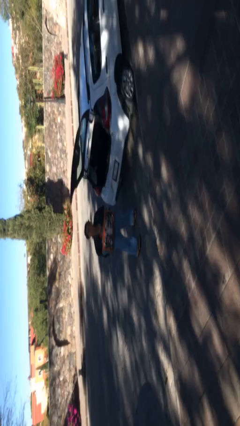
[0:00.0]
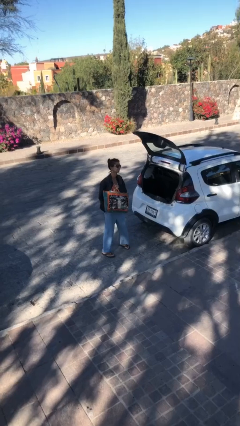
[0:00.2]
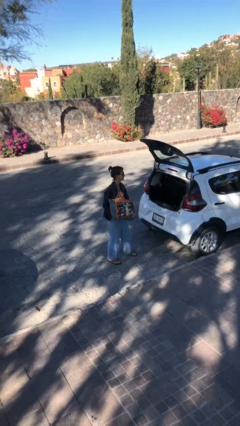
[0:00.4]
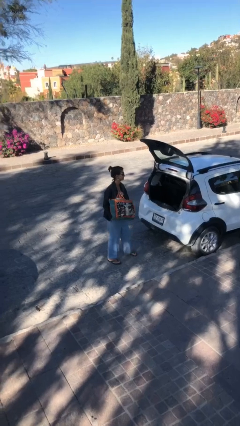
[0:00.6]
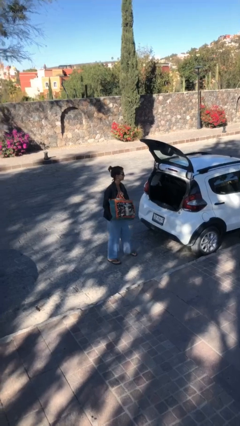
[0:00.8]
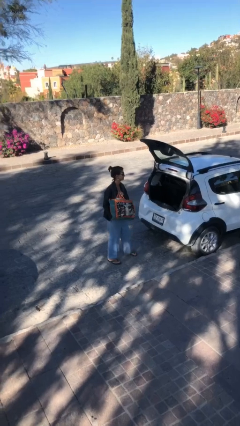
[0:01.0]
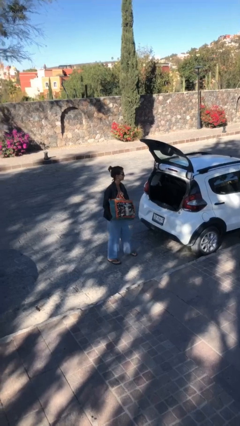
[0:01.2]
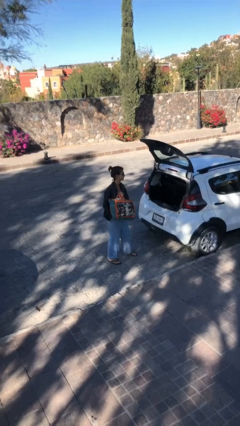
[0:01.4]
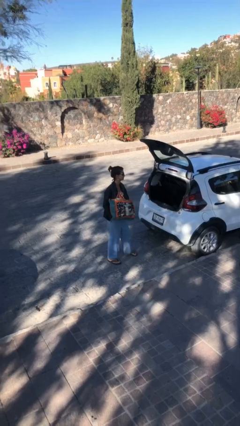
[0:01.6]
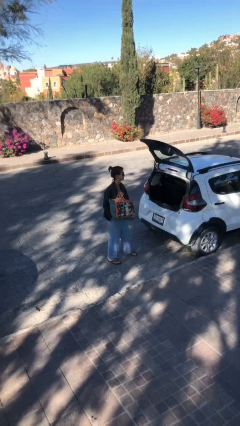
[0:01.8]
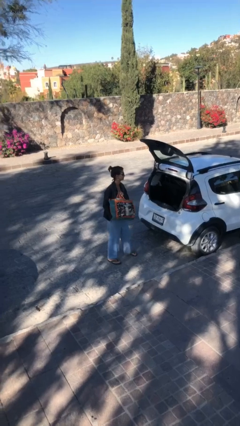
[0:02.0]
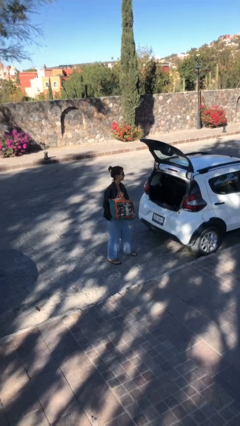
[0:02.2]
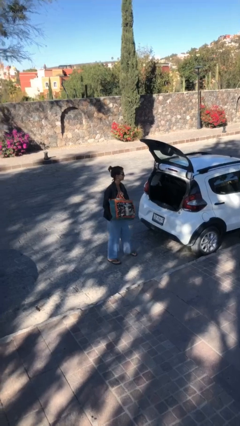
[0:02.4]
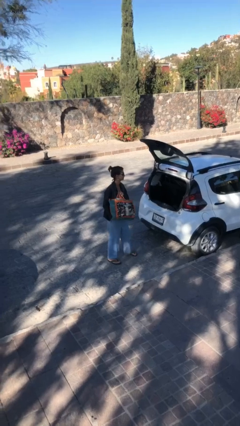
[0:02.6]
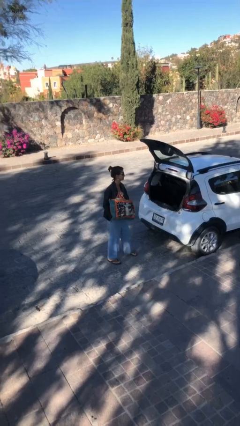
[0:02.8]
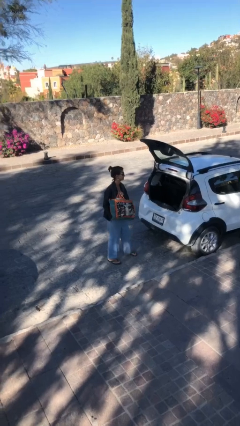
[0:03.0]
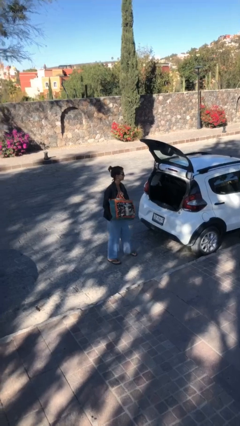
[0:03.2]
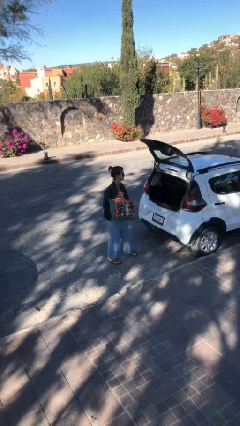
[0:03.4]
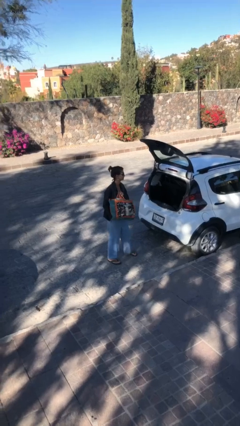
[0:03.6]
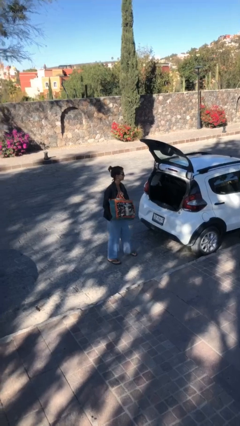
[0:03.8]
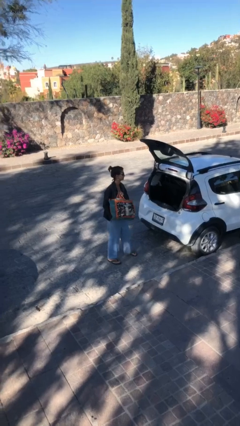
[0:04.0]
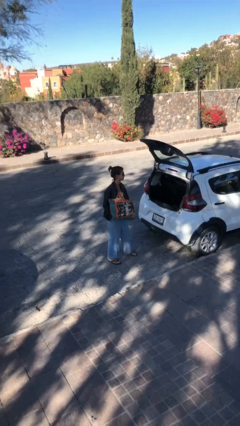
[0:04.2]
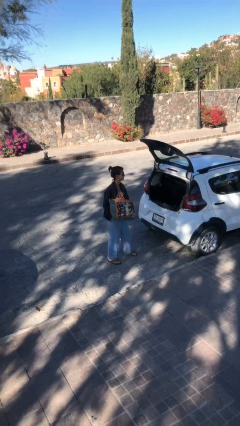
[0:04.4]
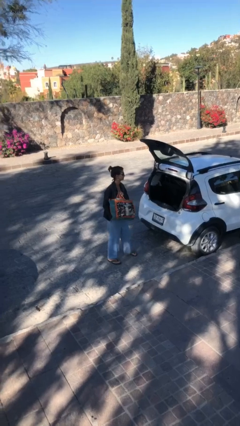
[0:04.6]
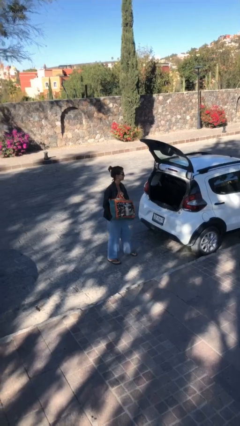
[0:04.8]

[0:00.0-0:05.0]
person unloads car

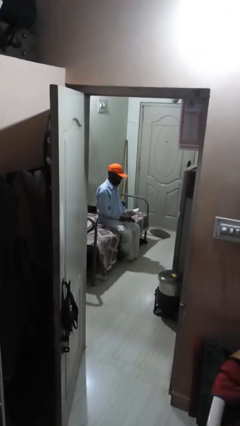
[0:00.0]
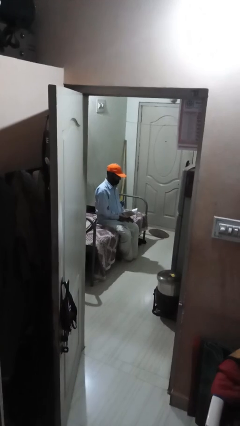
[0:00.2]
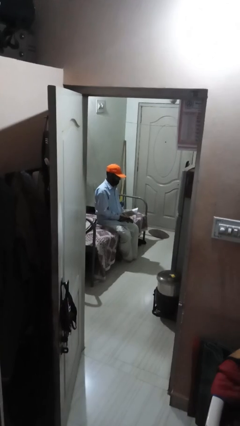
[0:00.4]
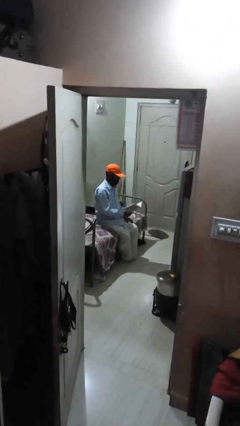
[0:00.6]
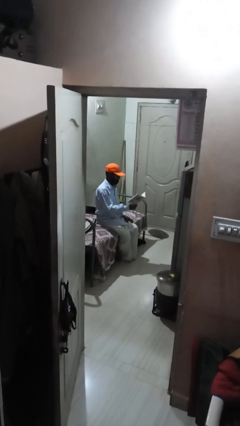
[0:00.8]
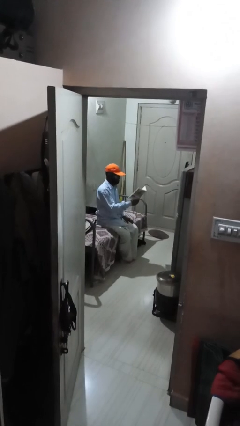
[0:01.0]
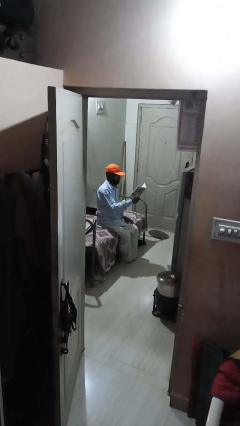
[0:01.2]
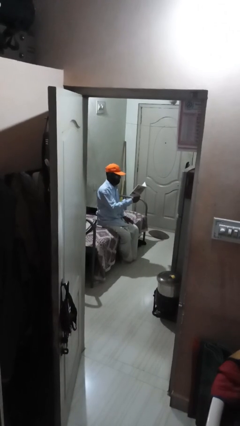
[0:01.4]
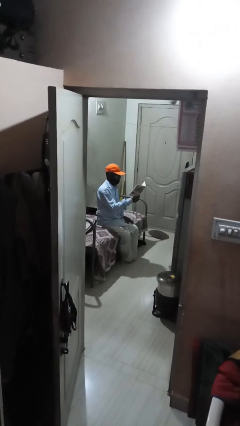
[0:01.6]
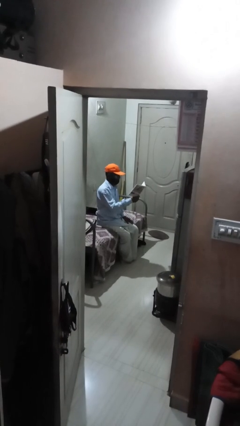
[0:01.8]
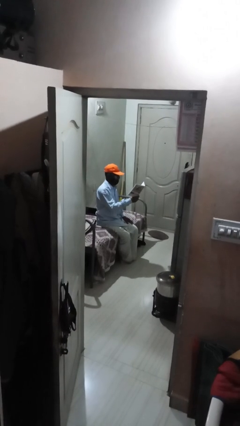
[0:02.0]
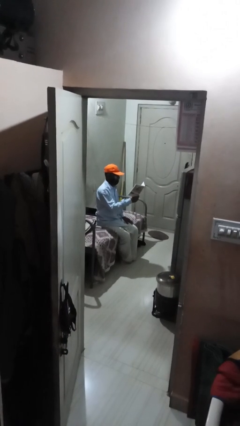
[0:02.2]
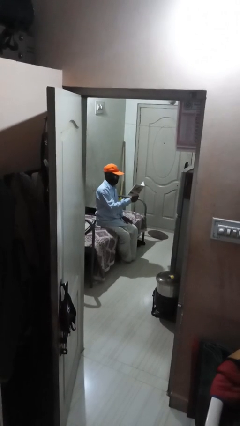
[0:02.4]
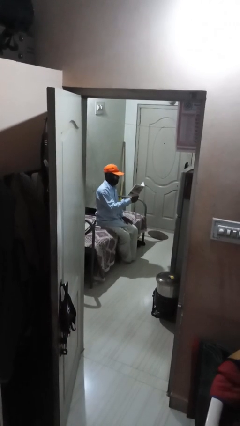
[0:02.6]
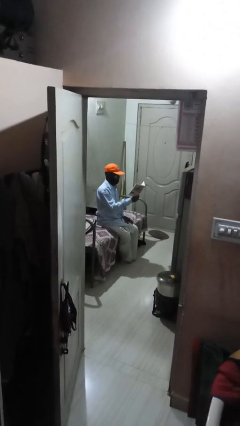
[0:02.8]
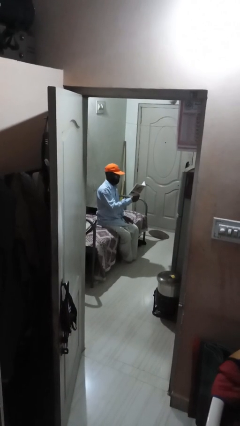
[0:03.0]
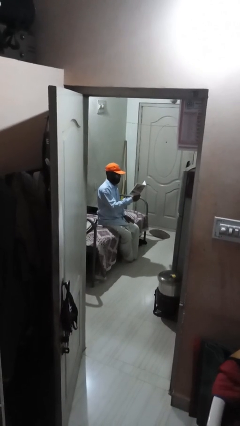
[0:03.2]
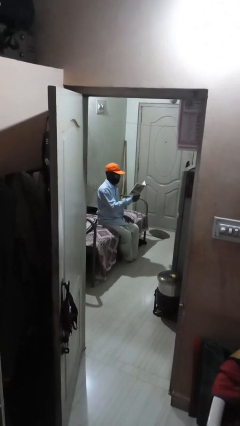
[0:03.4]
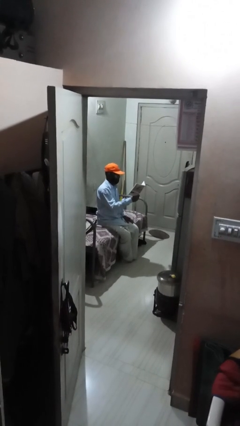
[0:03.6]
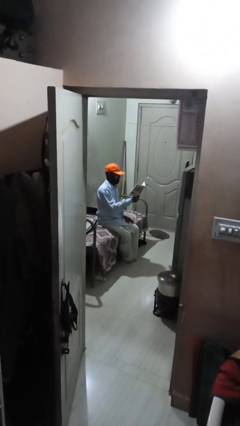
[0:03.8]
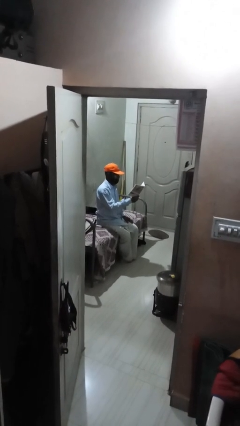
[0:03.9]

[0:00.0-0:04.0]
person reads document

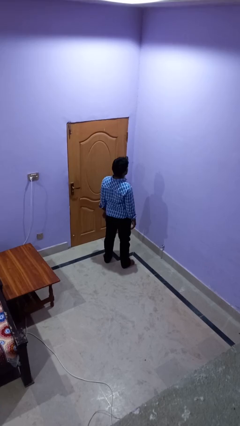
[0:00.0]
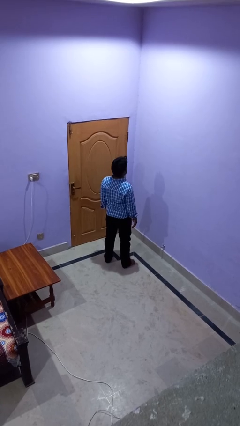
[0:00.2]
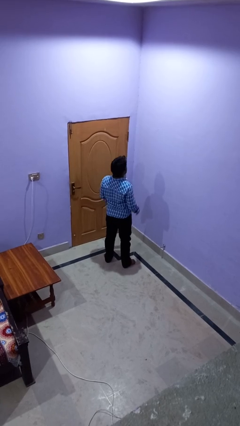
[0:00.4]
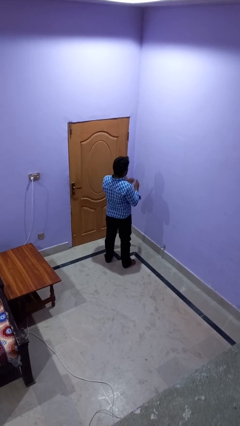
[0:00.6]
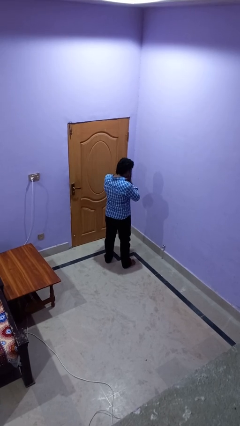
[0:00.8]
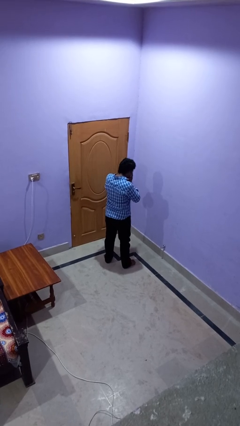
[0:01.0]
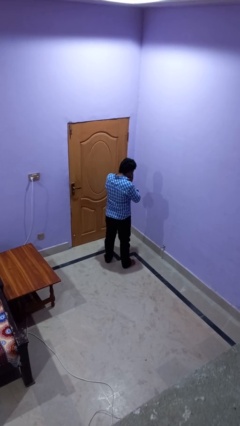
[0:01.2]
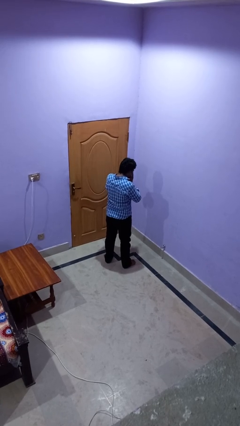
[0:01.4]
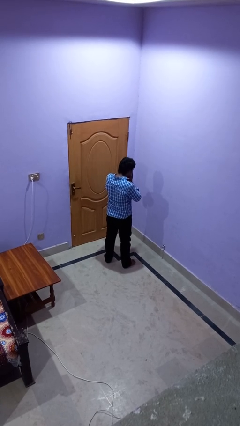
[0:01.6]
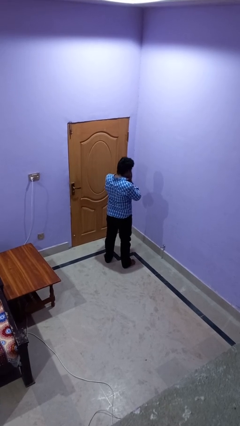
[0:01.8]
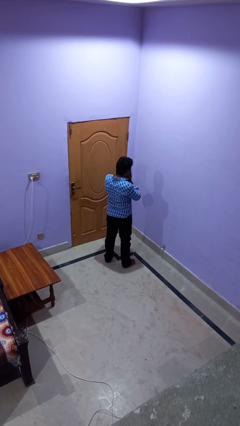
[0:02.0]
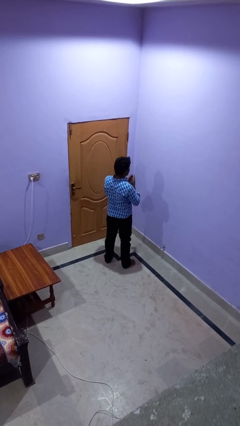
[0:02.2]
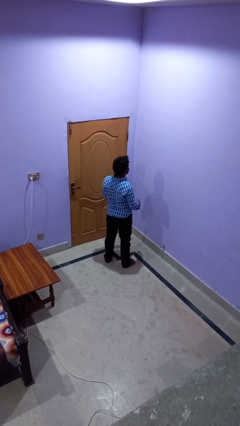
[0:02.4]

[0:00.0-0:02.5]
person sneezes into hand

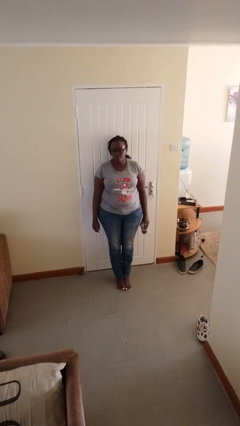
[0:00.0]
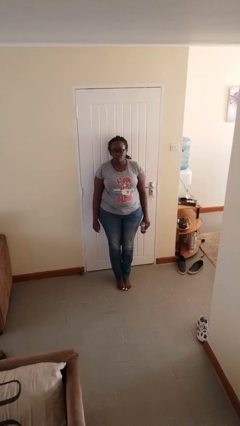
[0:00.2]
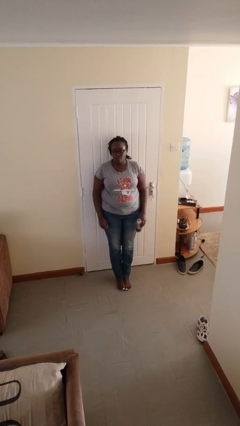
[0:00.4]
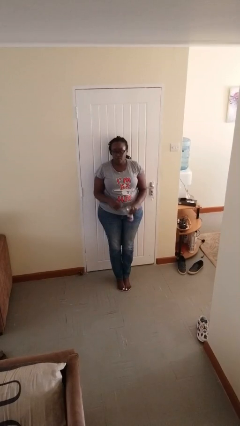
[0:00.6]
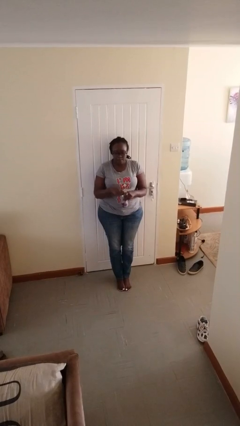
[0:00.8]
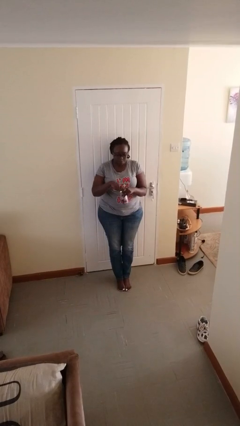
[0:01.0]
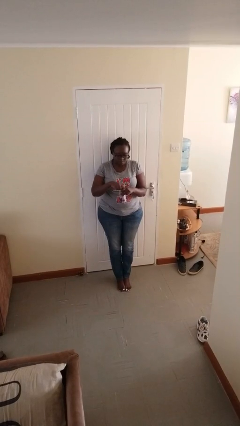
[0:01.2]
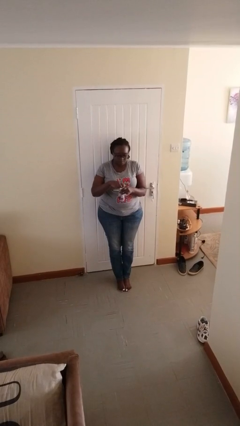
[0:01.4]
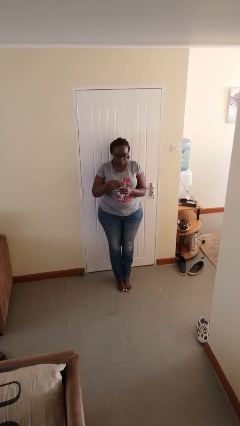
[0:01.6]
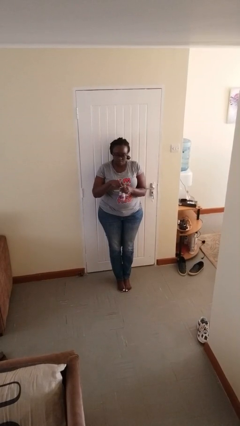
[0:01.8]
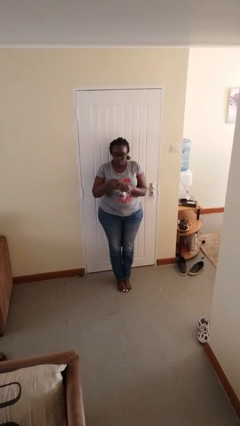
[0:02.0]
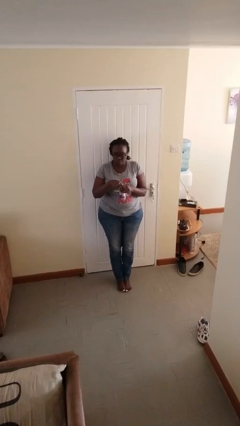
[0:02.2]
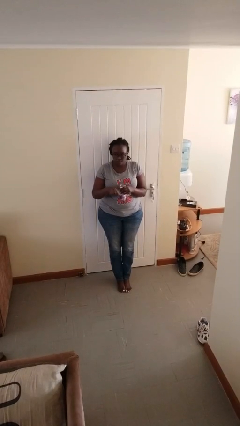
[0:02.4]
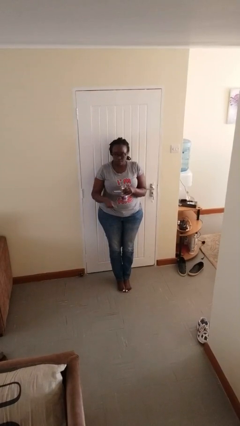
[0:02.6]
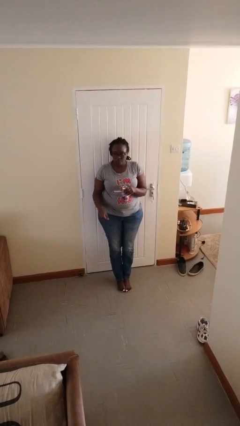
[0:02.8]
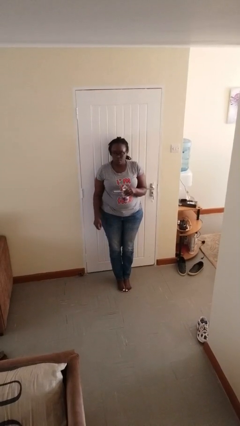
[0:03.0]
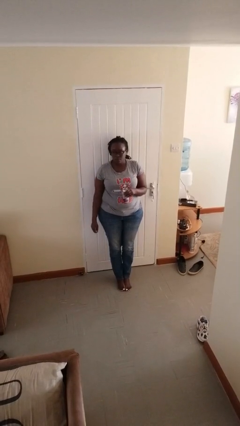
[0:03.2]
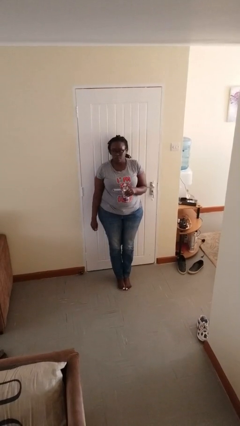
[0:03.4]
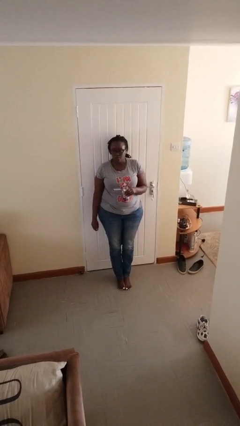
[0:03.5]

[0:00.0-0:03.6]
person opens beverage can

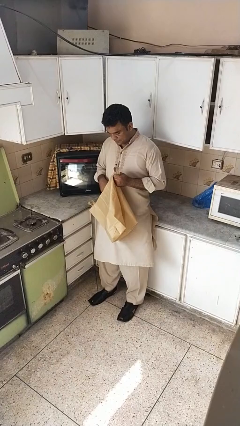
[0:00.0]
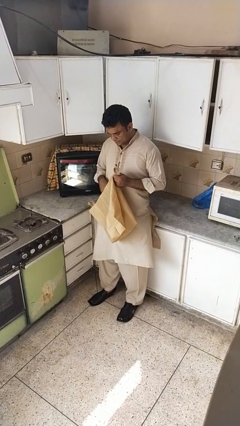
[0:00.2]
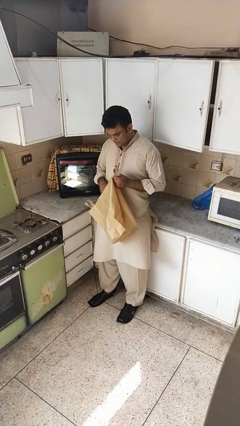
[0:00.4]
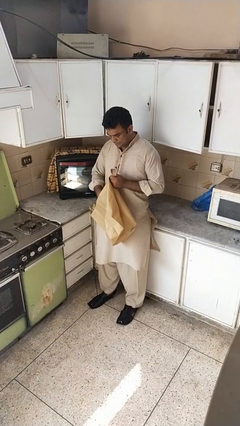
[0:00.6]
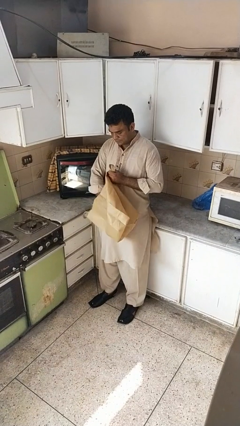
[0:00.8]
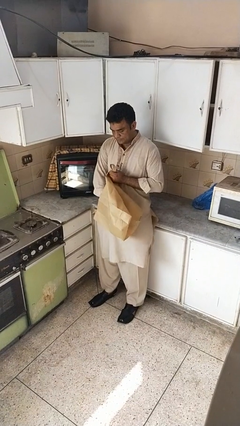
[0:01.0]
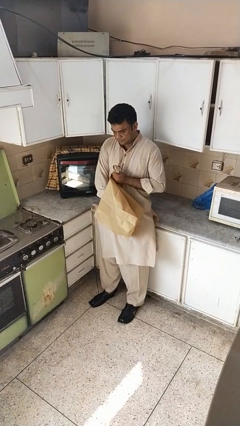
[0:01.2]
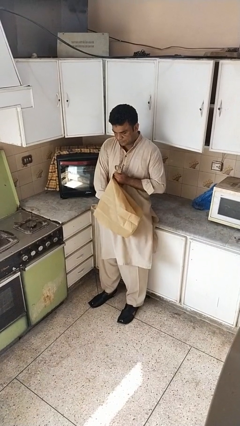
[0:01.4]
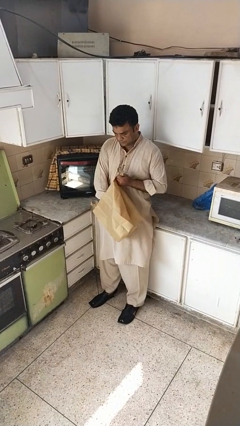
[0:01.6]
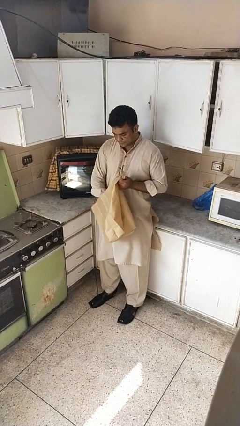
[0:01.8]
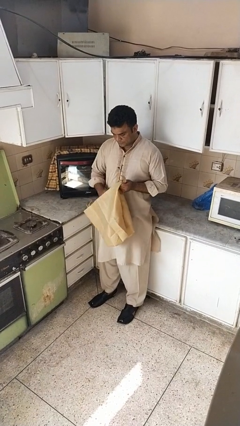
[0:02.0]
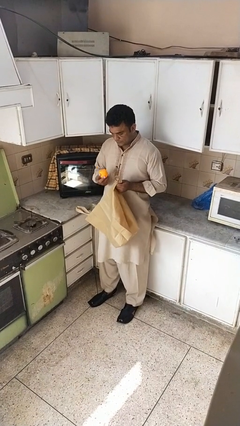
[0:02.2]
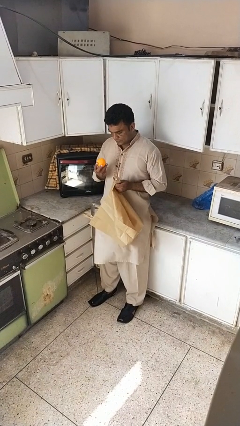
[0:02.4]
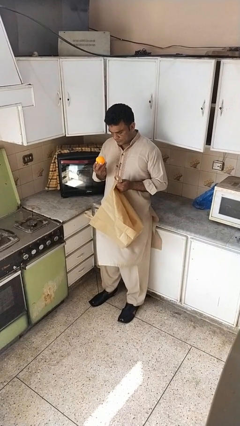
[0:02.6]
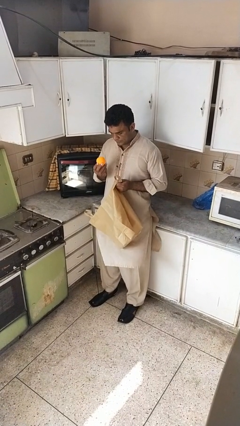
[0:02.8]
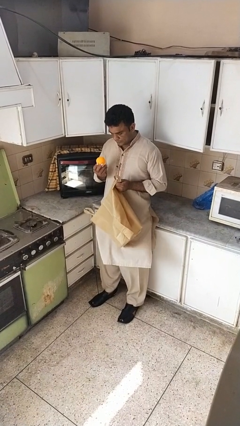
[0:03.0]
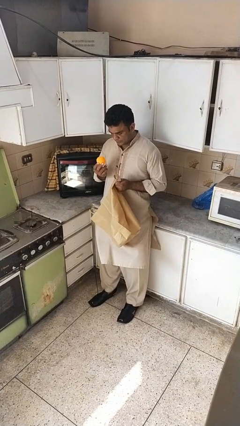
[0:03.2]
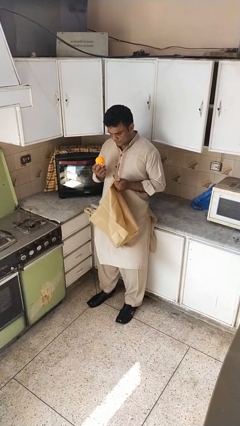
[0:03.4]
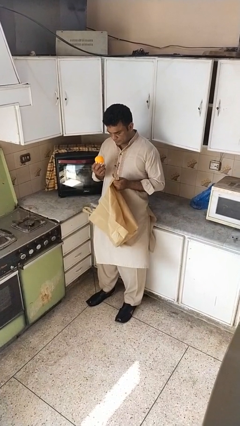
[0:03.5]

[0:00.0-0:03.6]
person takes object from bag
